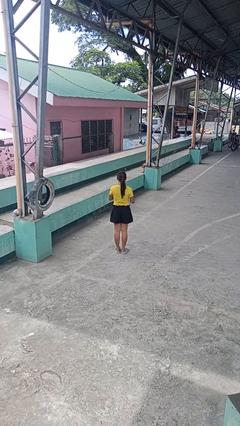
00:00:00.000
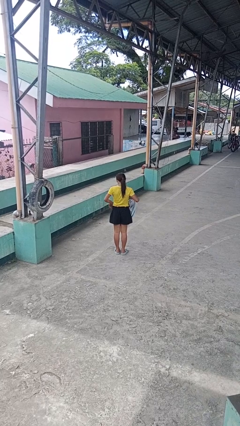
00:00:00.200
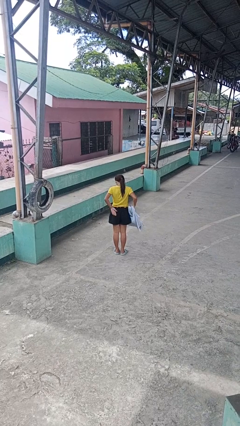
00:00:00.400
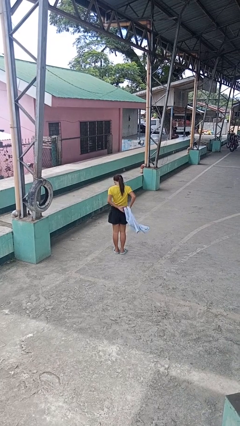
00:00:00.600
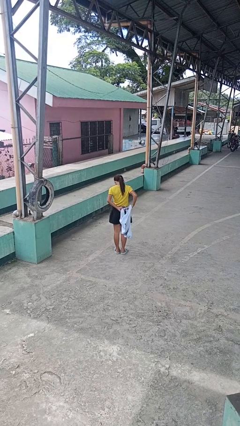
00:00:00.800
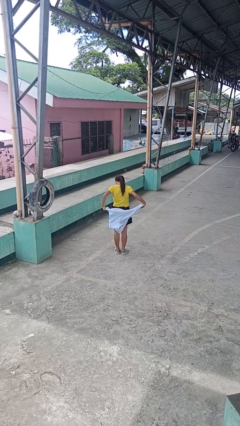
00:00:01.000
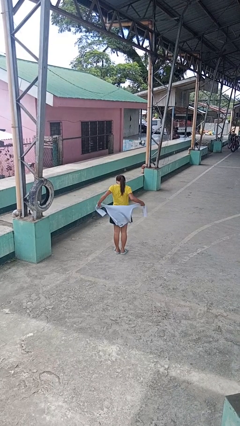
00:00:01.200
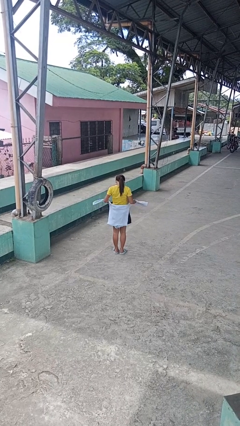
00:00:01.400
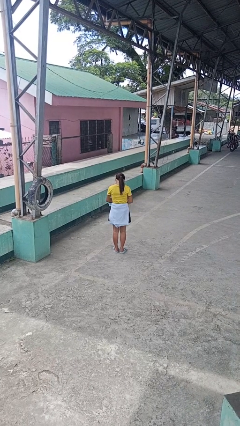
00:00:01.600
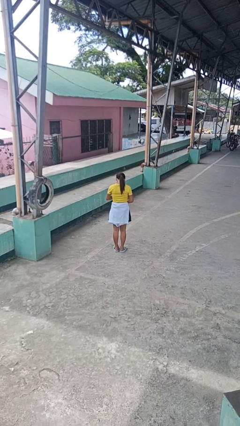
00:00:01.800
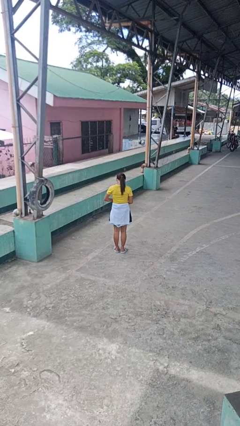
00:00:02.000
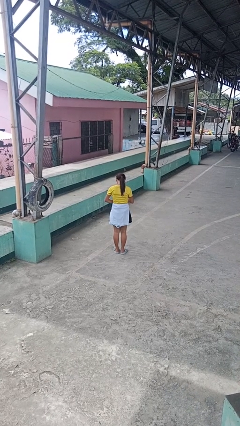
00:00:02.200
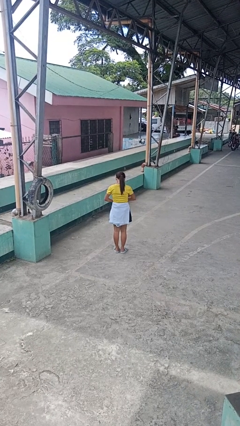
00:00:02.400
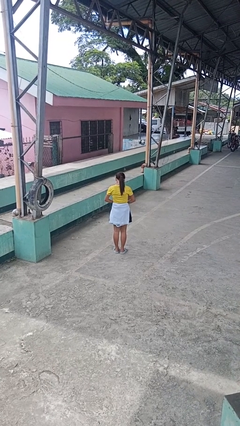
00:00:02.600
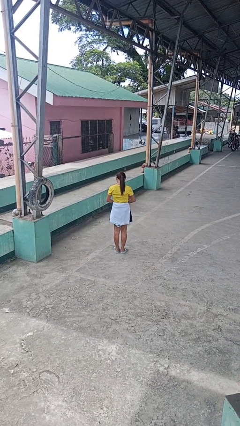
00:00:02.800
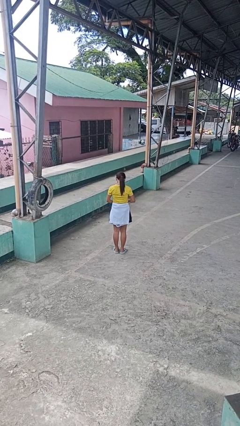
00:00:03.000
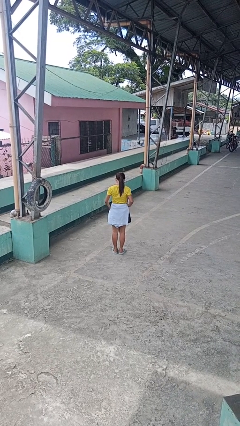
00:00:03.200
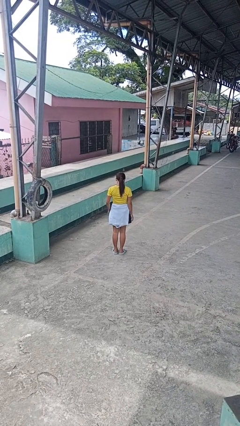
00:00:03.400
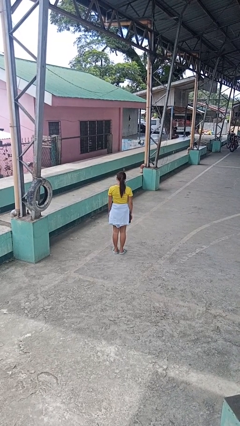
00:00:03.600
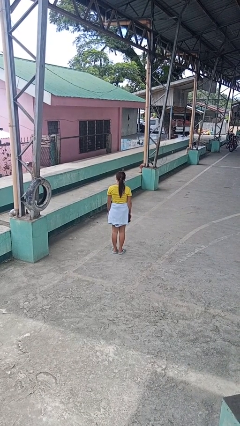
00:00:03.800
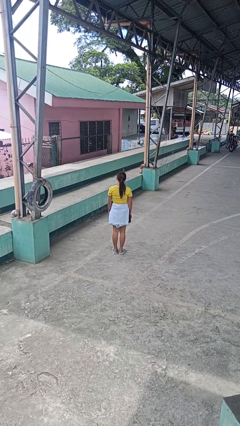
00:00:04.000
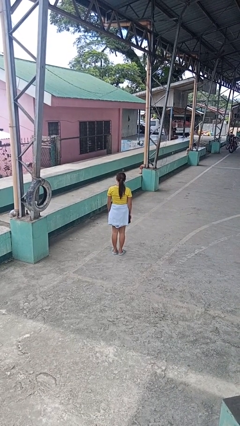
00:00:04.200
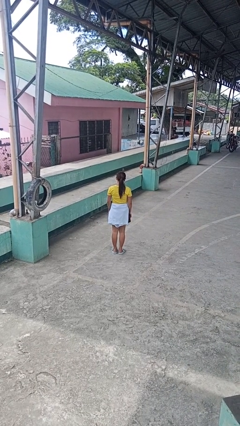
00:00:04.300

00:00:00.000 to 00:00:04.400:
person ties jacket around waist

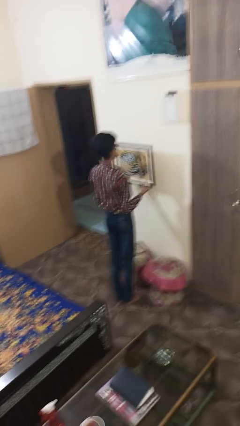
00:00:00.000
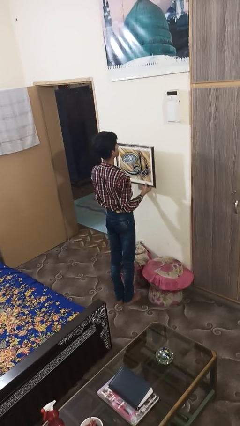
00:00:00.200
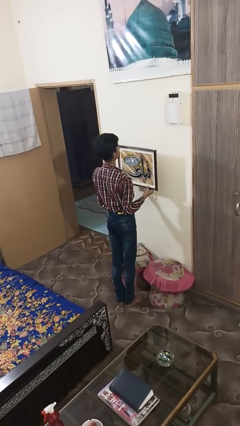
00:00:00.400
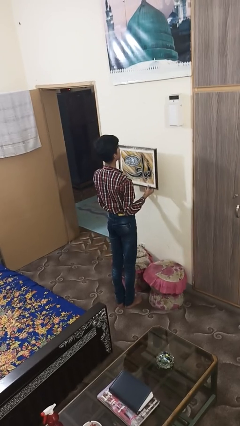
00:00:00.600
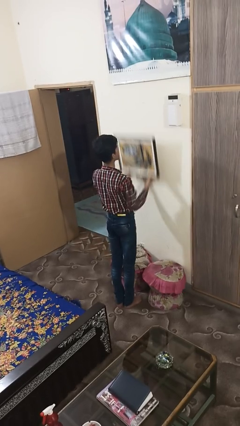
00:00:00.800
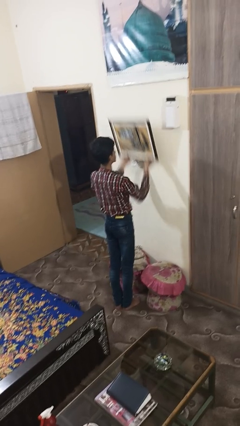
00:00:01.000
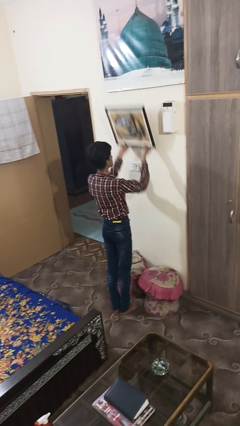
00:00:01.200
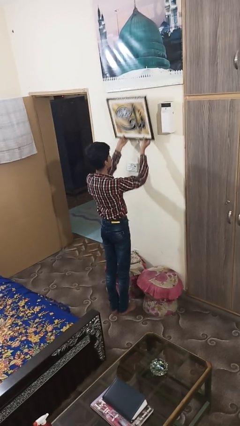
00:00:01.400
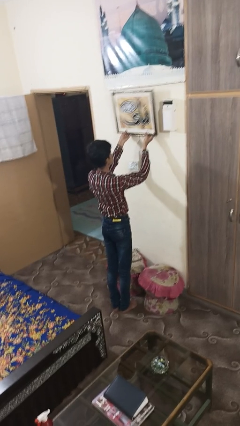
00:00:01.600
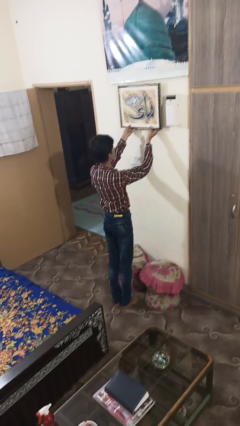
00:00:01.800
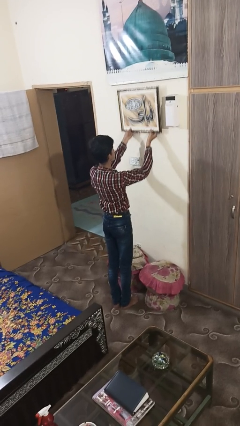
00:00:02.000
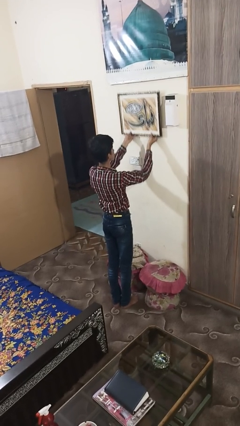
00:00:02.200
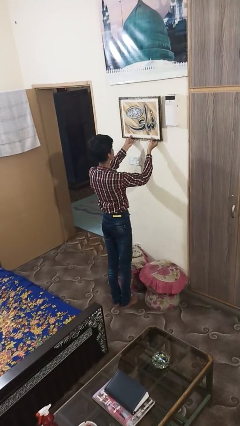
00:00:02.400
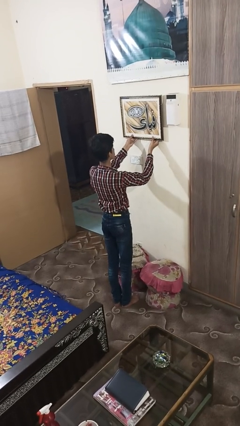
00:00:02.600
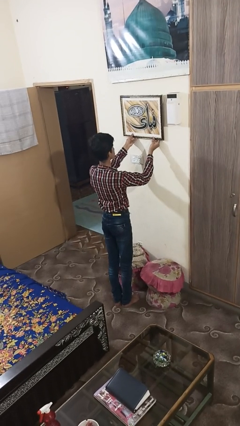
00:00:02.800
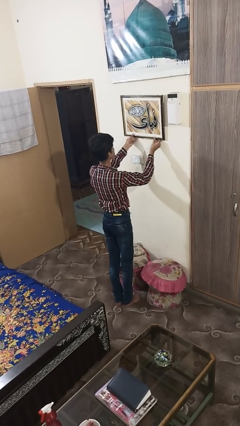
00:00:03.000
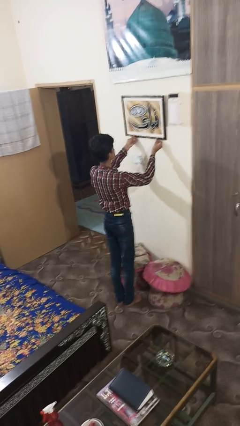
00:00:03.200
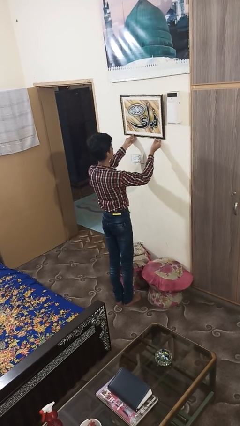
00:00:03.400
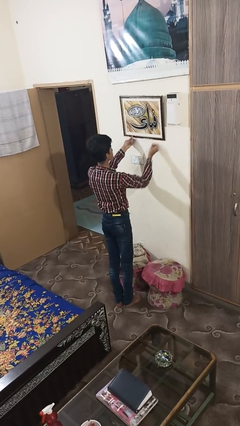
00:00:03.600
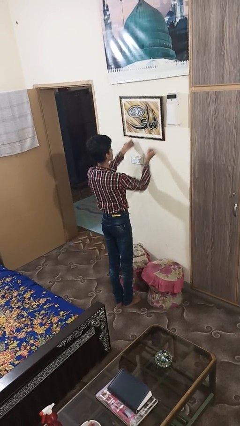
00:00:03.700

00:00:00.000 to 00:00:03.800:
person puts up picture frame

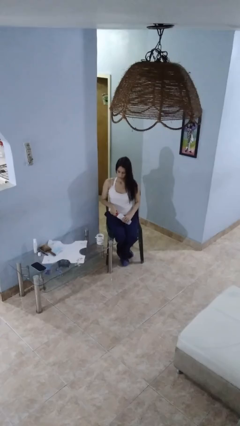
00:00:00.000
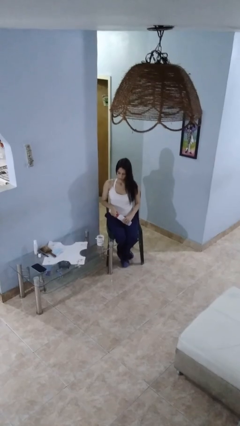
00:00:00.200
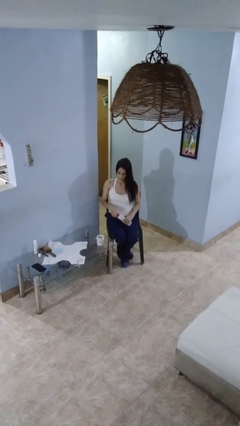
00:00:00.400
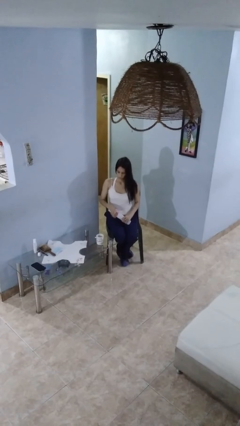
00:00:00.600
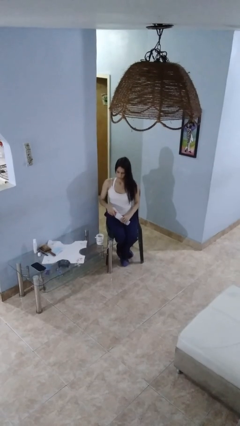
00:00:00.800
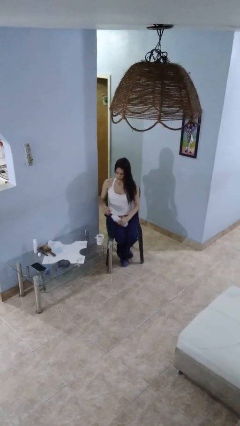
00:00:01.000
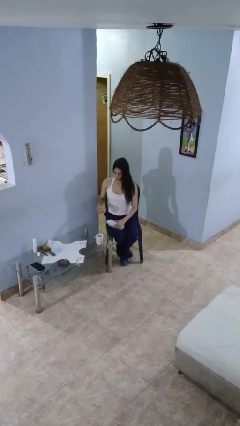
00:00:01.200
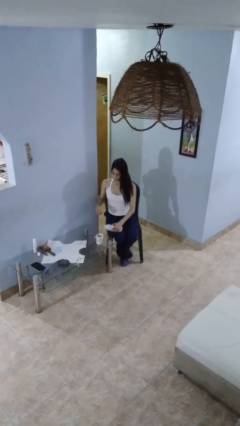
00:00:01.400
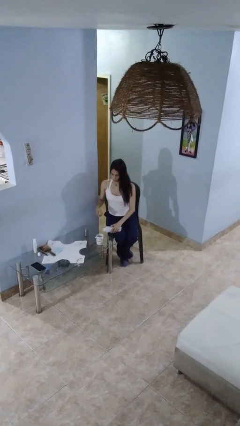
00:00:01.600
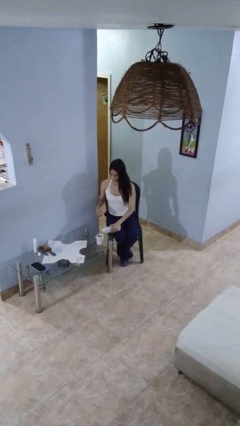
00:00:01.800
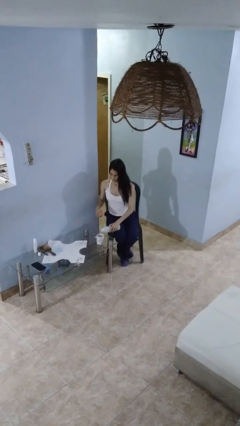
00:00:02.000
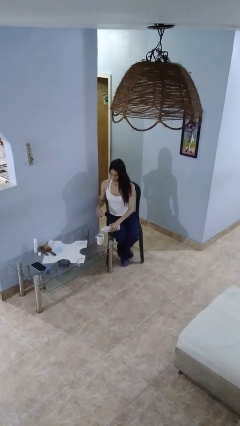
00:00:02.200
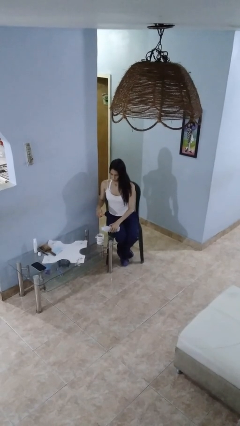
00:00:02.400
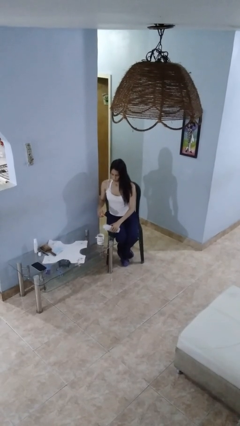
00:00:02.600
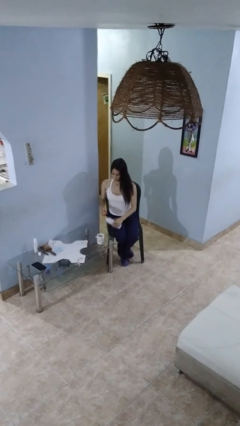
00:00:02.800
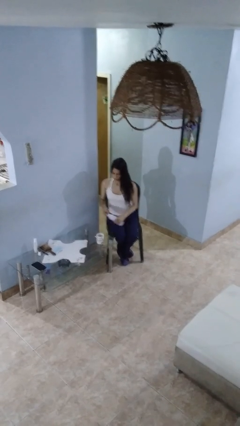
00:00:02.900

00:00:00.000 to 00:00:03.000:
person pours liquid into cup

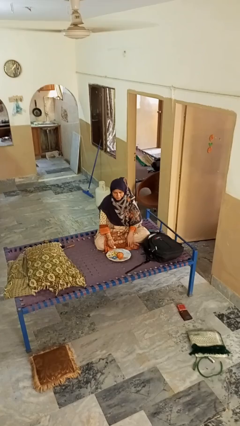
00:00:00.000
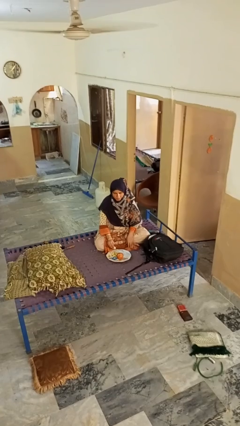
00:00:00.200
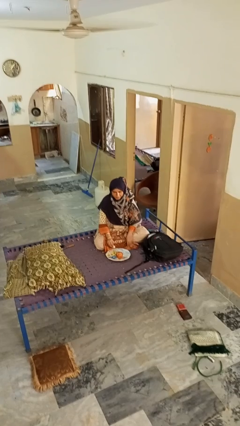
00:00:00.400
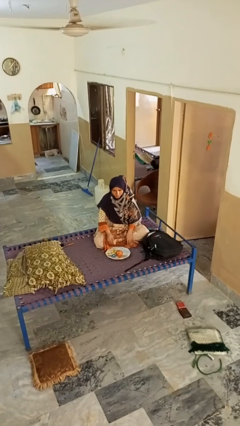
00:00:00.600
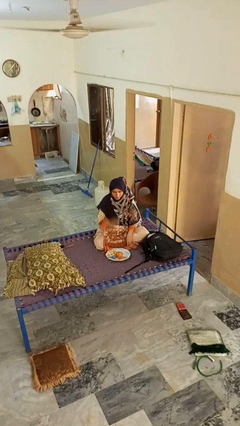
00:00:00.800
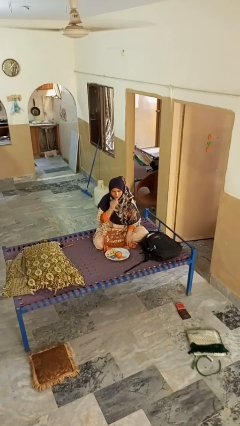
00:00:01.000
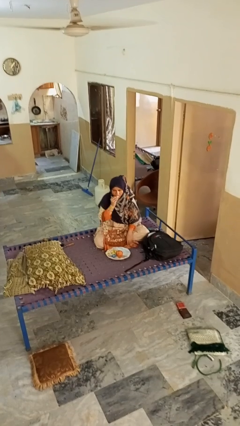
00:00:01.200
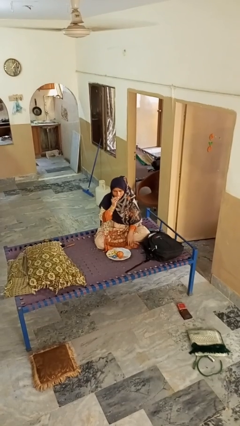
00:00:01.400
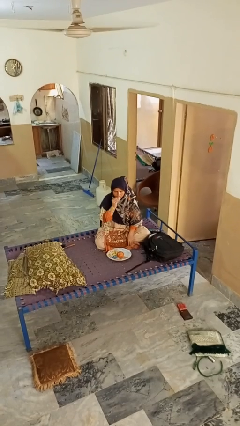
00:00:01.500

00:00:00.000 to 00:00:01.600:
person eats apple

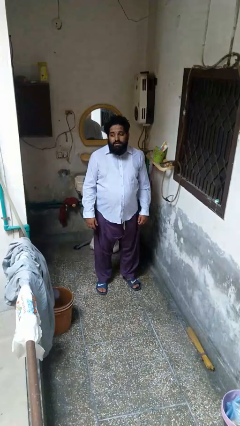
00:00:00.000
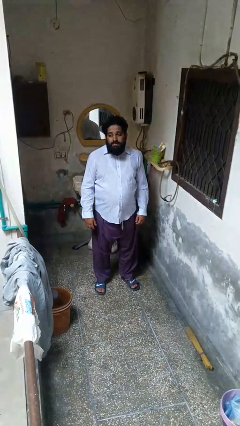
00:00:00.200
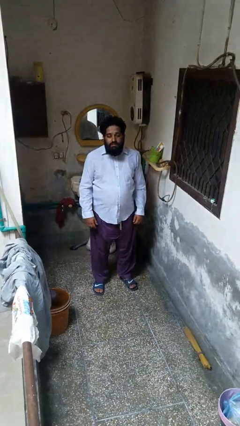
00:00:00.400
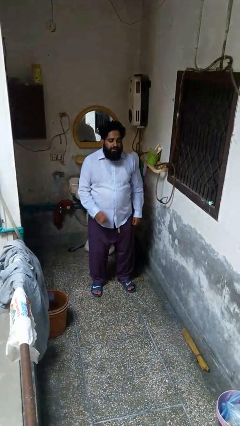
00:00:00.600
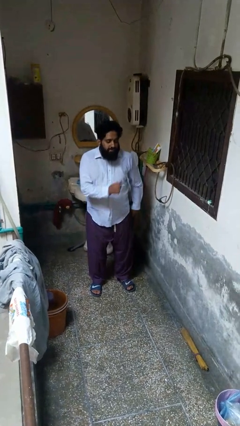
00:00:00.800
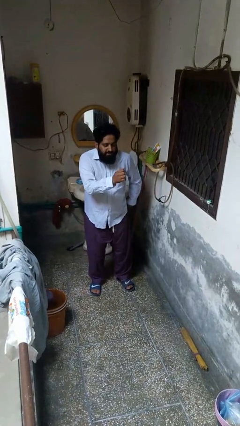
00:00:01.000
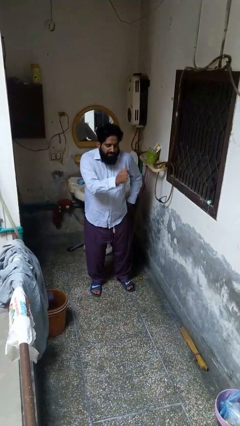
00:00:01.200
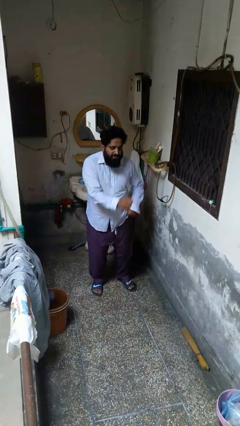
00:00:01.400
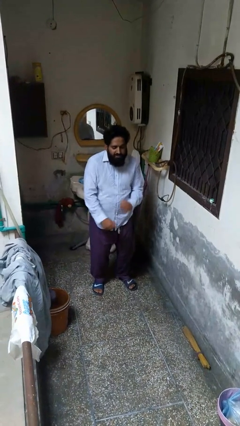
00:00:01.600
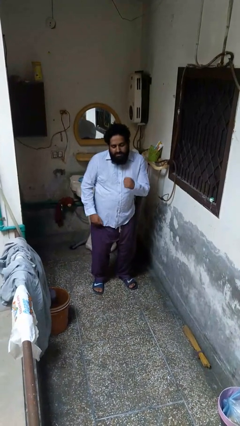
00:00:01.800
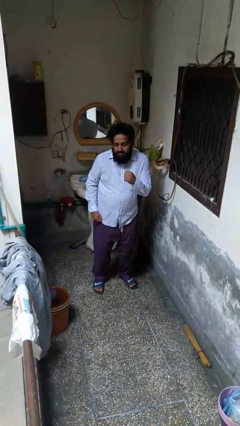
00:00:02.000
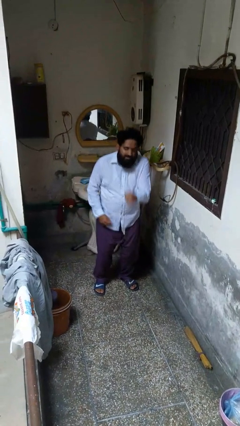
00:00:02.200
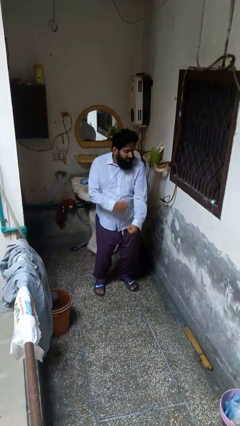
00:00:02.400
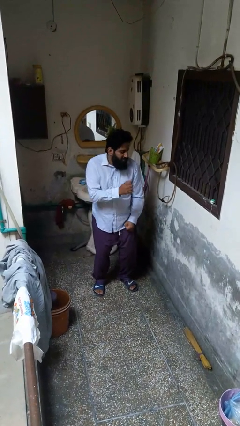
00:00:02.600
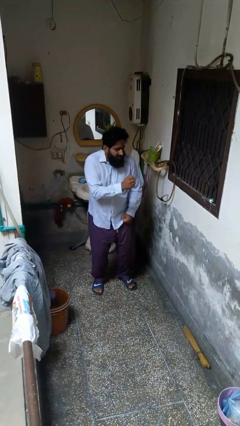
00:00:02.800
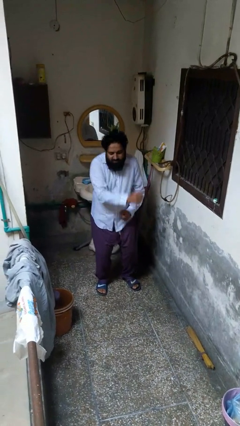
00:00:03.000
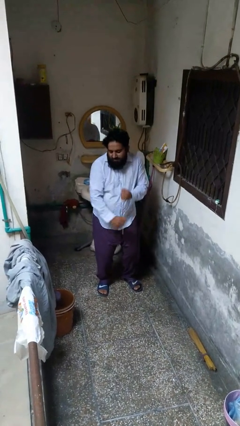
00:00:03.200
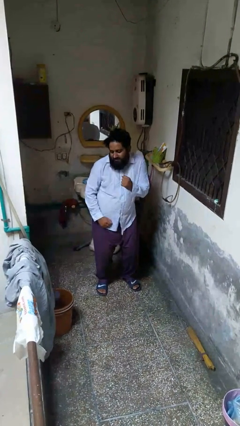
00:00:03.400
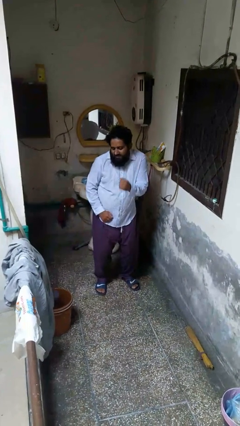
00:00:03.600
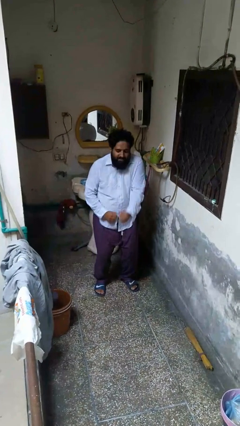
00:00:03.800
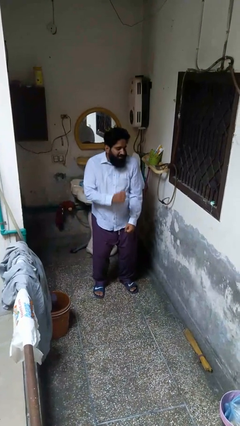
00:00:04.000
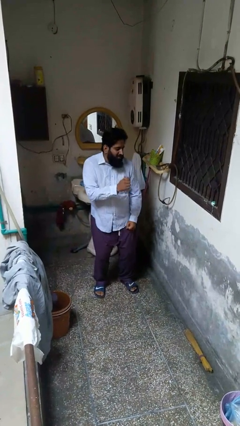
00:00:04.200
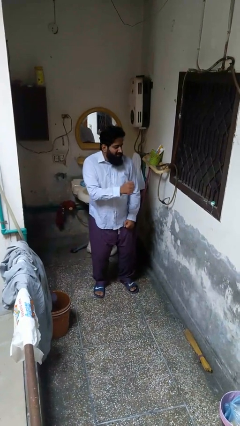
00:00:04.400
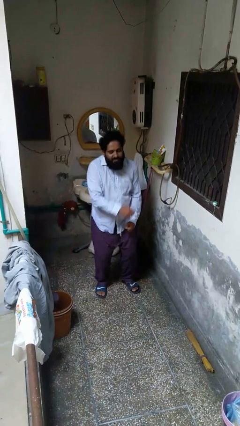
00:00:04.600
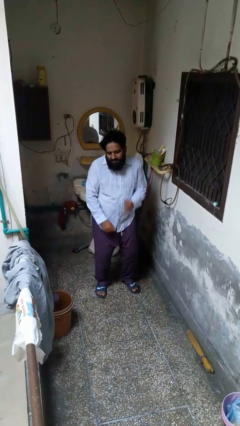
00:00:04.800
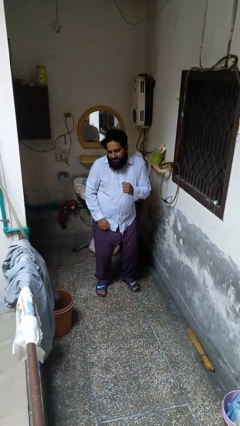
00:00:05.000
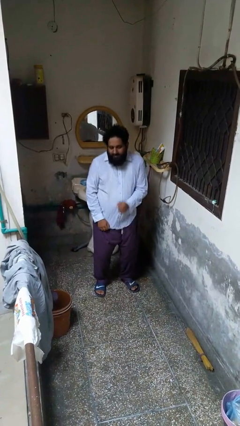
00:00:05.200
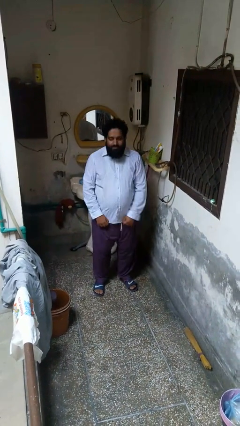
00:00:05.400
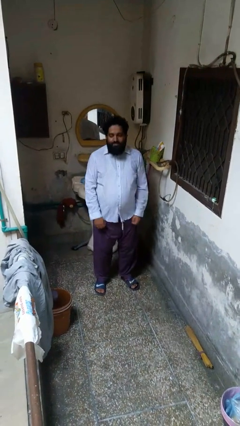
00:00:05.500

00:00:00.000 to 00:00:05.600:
person dances in place
